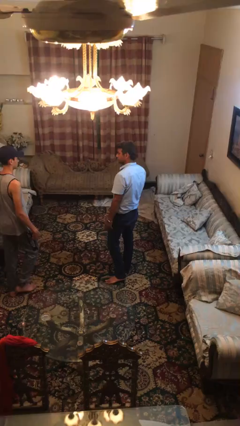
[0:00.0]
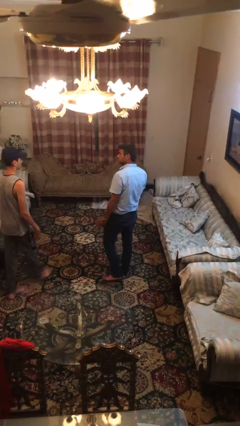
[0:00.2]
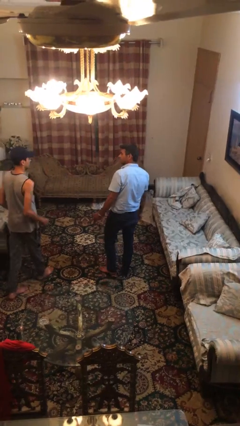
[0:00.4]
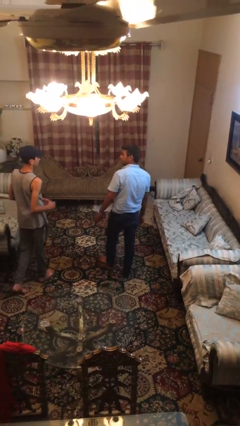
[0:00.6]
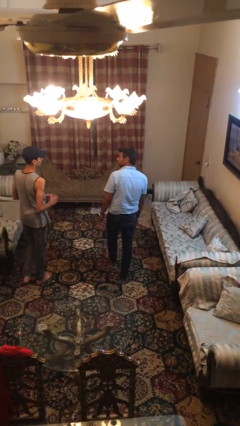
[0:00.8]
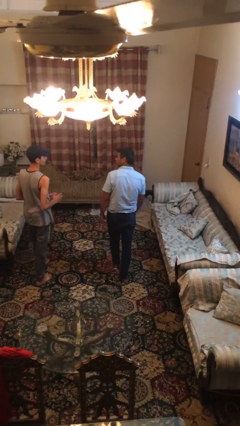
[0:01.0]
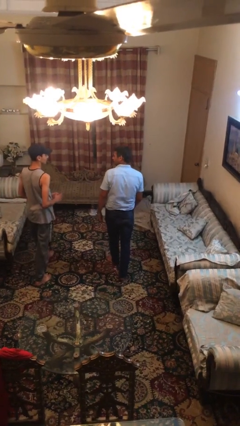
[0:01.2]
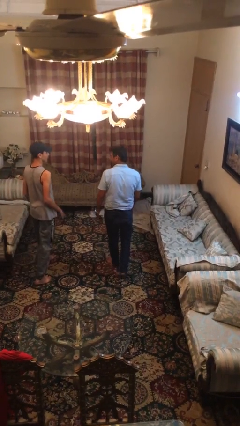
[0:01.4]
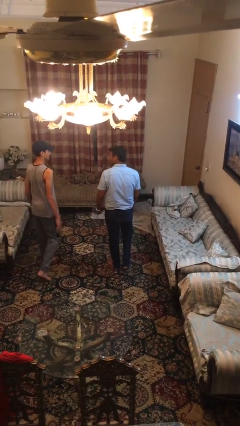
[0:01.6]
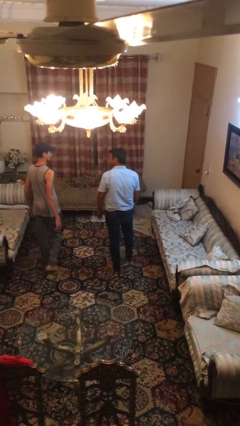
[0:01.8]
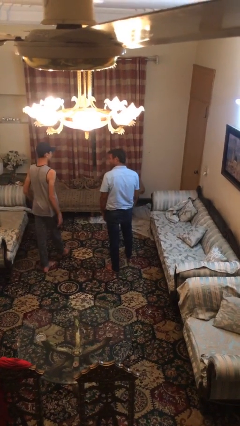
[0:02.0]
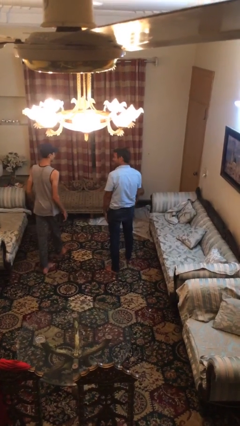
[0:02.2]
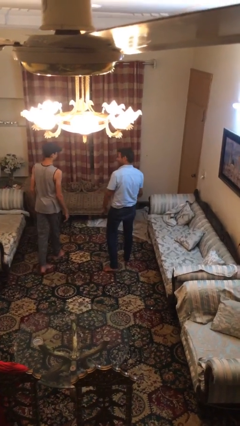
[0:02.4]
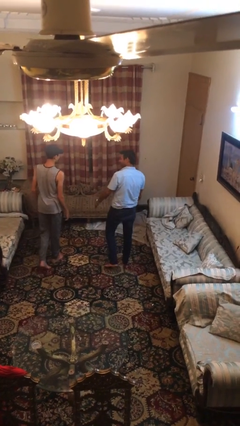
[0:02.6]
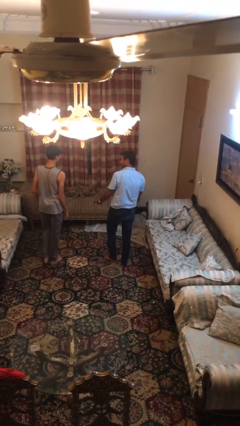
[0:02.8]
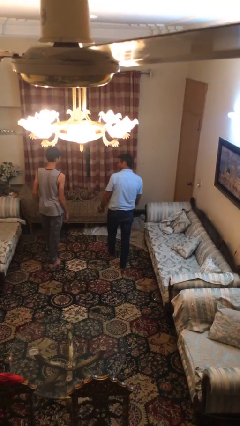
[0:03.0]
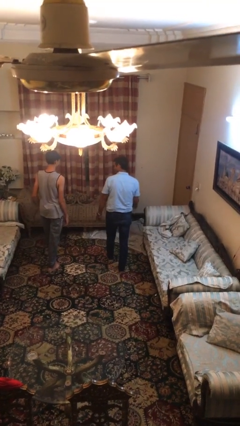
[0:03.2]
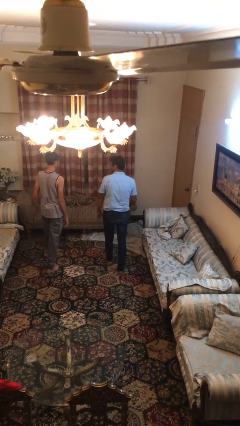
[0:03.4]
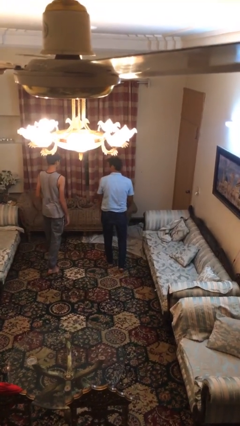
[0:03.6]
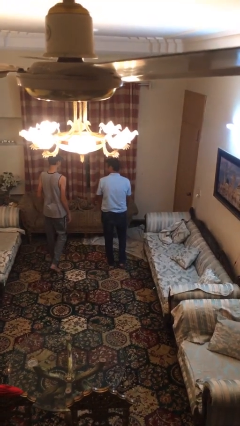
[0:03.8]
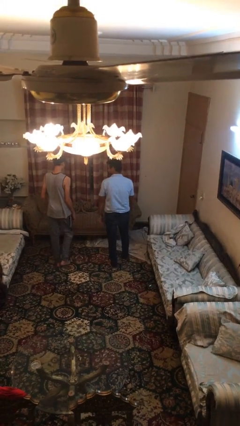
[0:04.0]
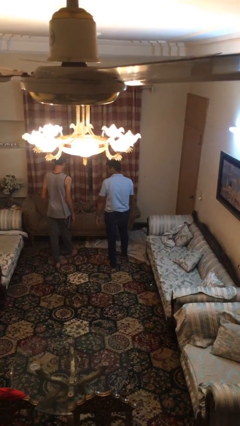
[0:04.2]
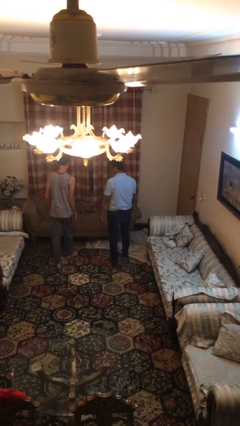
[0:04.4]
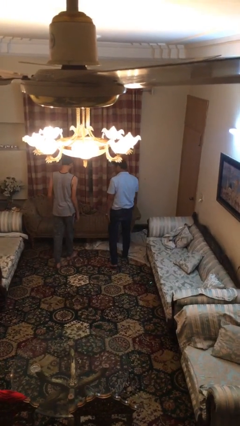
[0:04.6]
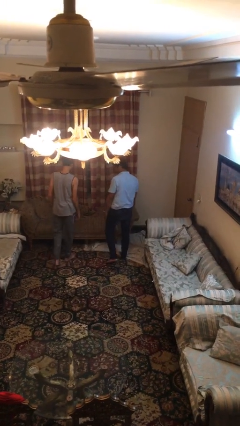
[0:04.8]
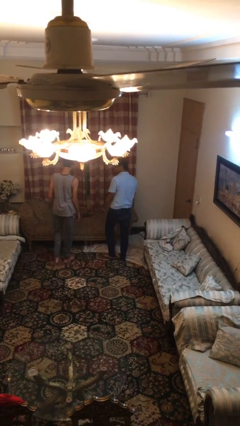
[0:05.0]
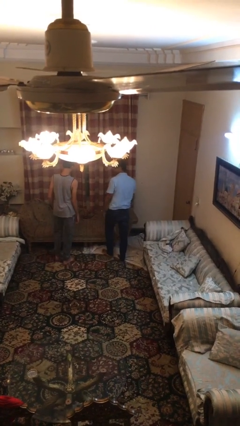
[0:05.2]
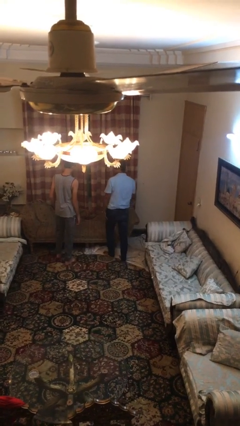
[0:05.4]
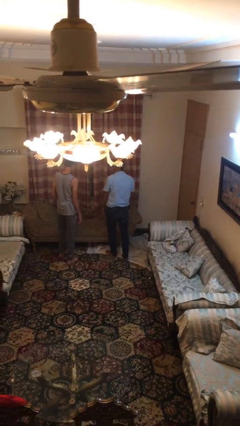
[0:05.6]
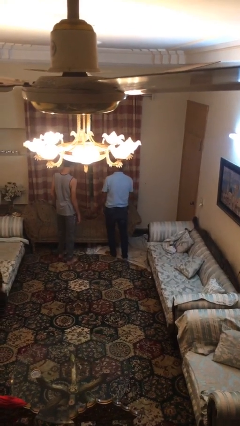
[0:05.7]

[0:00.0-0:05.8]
person talks to person

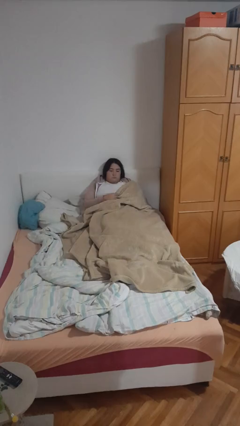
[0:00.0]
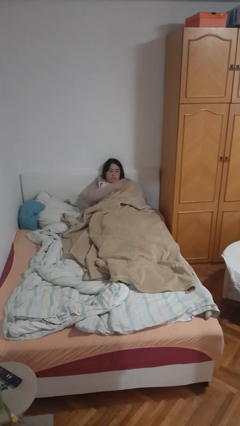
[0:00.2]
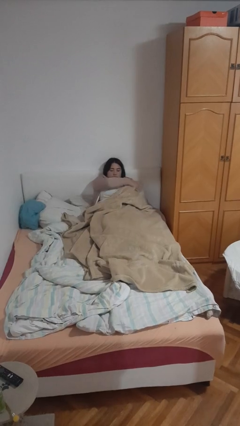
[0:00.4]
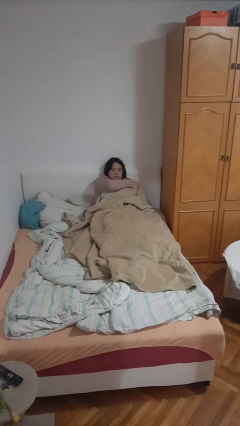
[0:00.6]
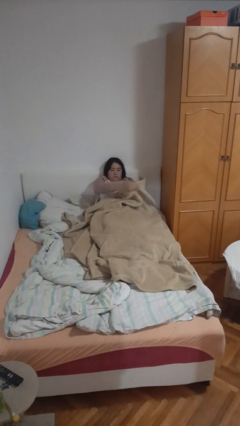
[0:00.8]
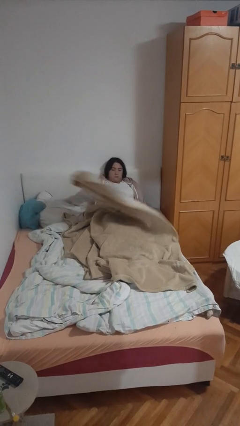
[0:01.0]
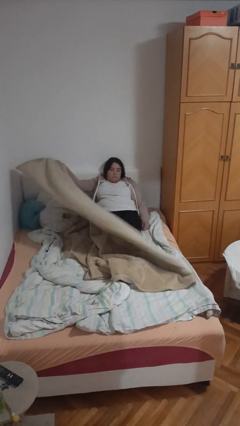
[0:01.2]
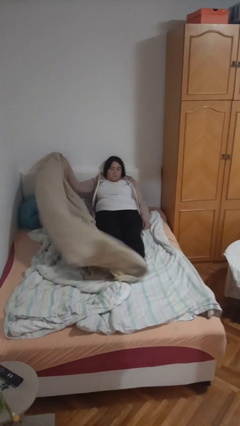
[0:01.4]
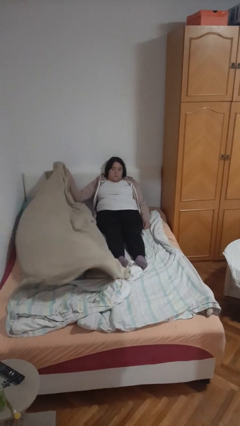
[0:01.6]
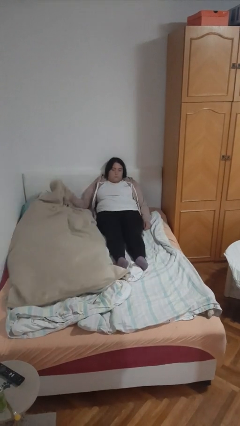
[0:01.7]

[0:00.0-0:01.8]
person uncovers with blanket

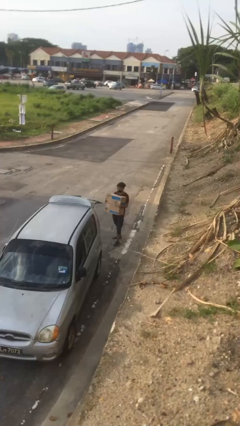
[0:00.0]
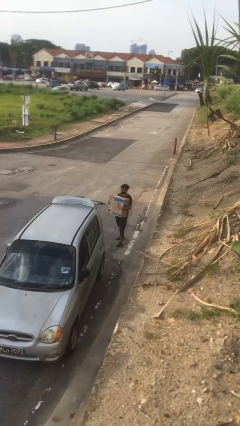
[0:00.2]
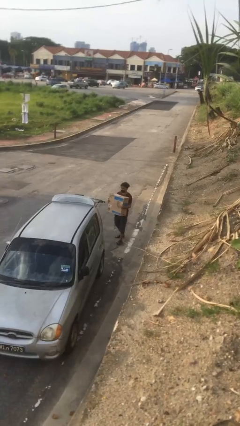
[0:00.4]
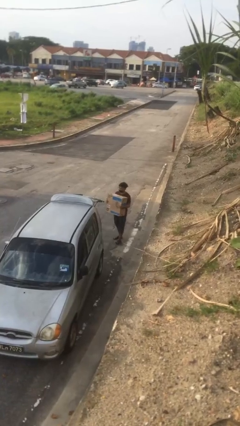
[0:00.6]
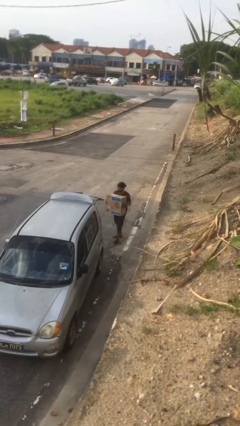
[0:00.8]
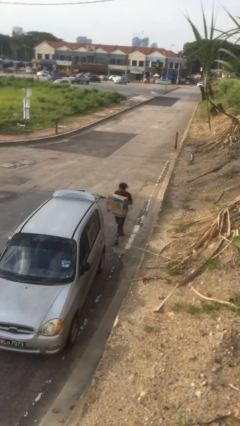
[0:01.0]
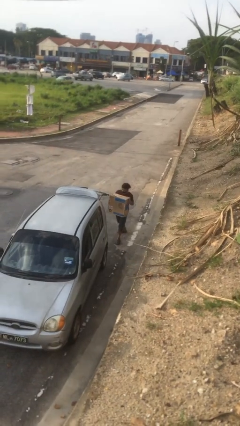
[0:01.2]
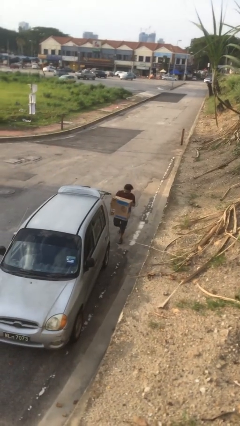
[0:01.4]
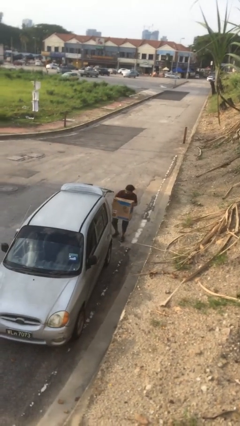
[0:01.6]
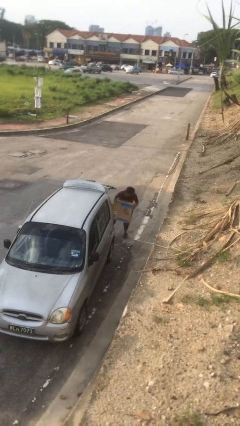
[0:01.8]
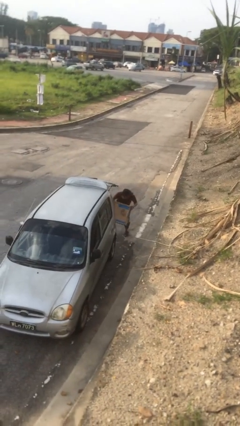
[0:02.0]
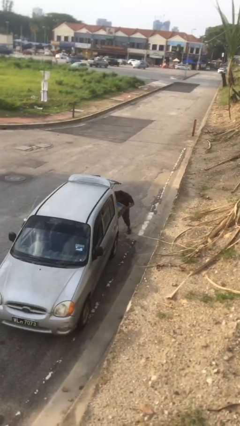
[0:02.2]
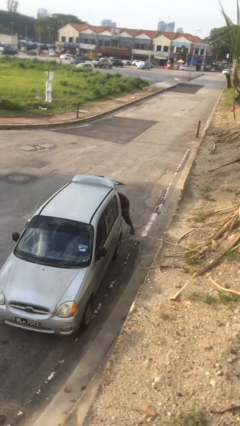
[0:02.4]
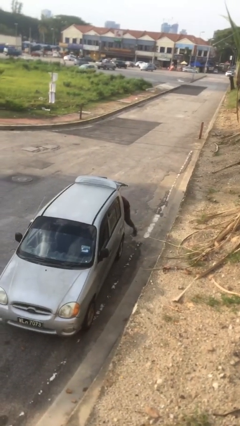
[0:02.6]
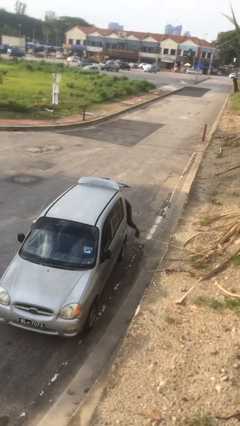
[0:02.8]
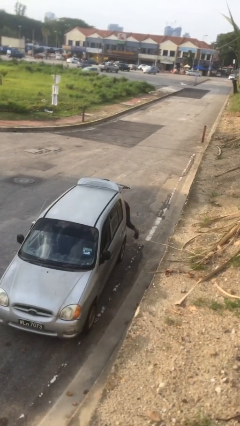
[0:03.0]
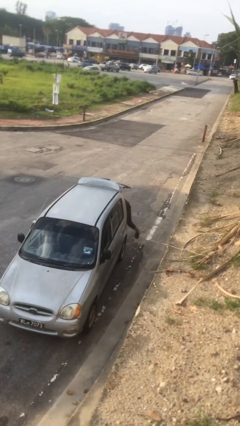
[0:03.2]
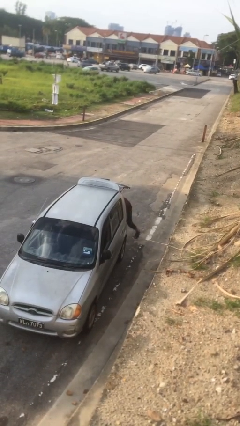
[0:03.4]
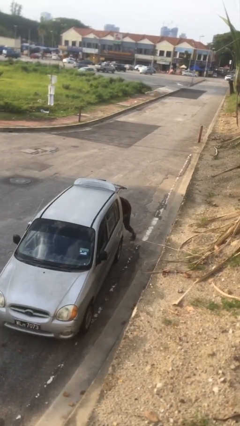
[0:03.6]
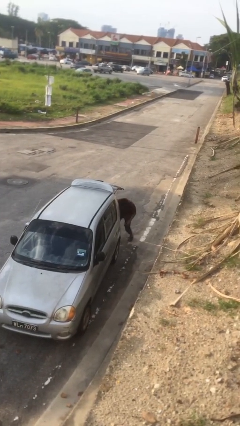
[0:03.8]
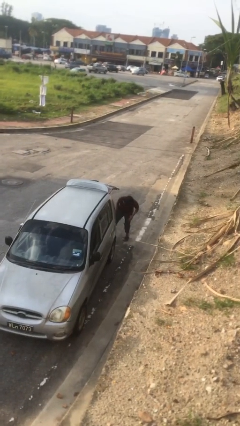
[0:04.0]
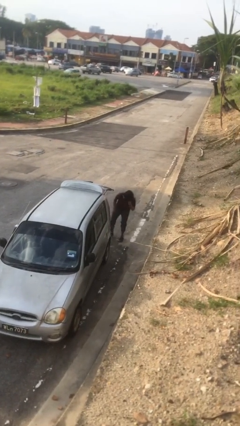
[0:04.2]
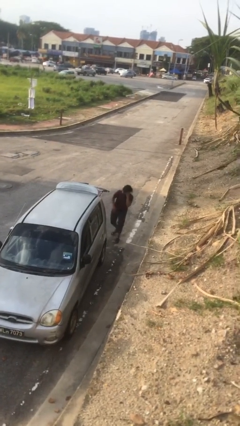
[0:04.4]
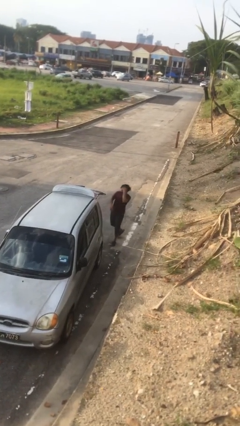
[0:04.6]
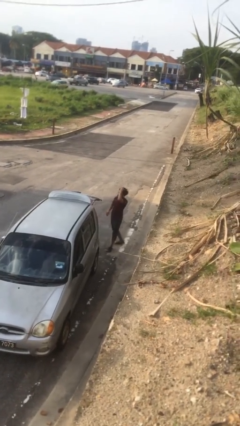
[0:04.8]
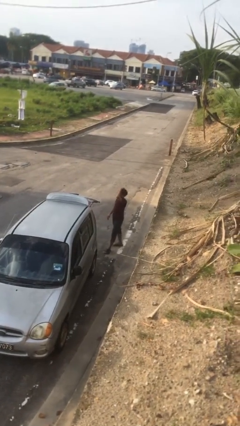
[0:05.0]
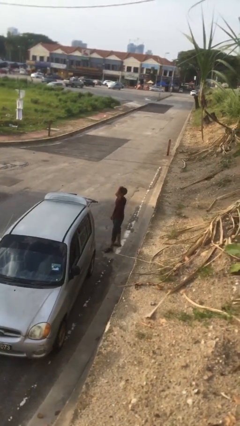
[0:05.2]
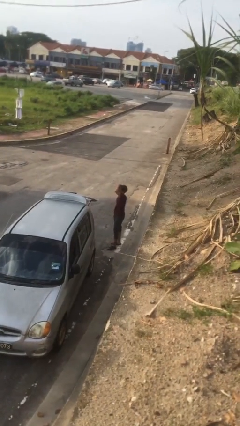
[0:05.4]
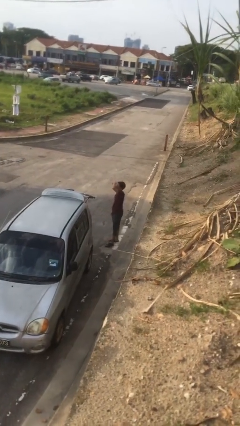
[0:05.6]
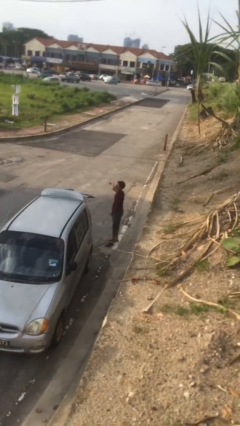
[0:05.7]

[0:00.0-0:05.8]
person loads car

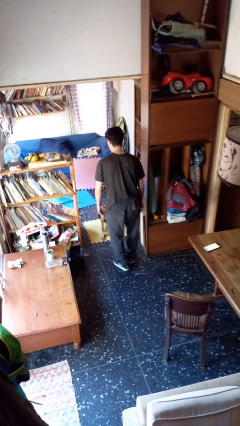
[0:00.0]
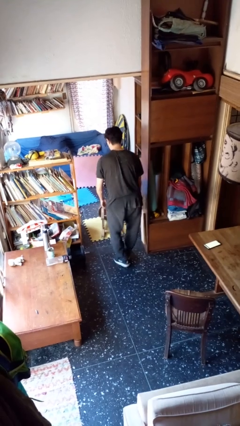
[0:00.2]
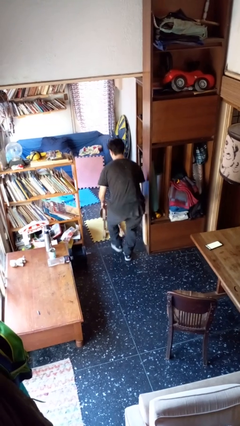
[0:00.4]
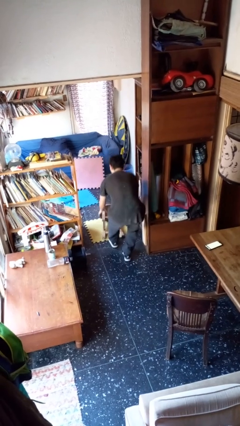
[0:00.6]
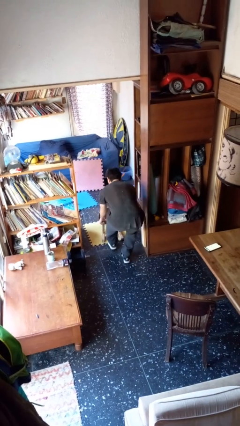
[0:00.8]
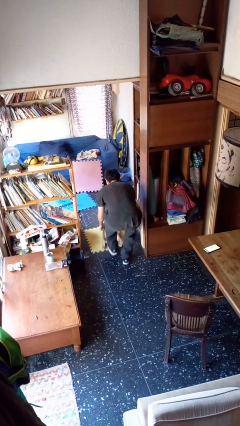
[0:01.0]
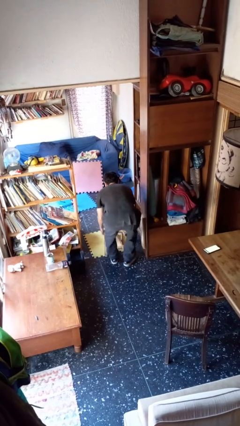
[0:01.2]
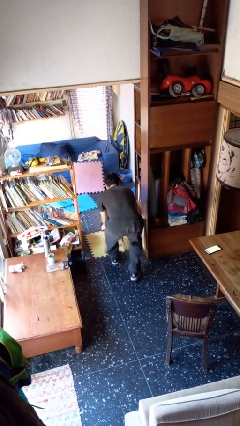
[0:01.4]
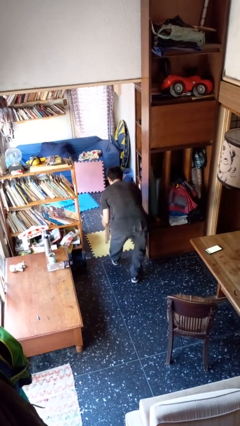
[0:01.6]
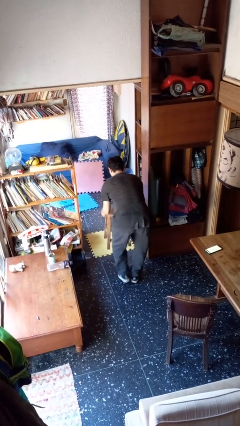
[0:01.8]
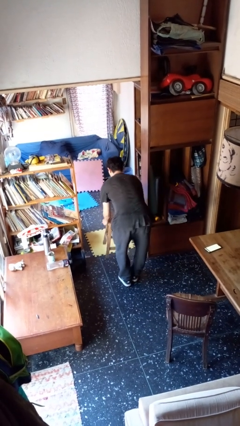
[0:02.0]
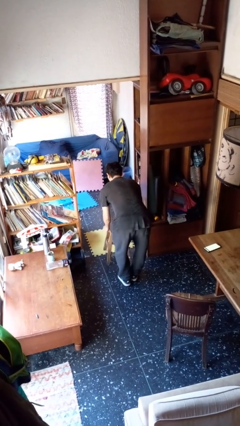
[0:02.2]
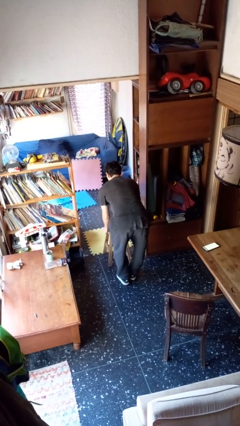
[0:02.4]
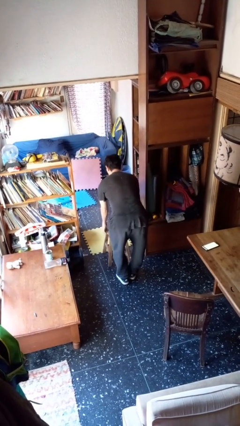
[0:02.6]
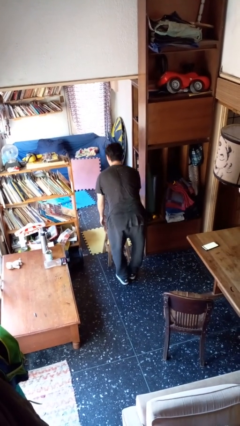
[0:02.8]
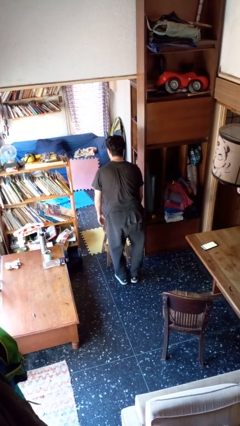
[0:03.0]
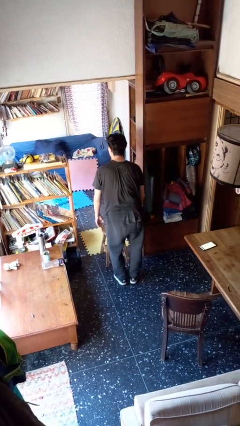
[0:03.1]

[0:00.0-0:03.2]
person sets upright furniture

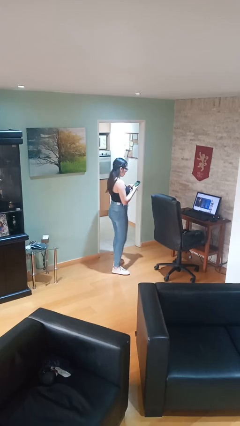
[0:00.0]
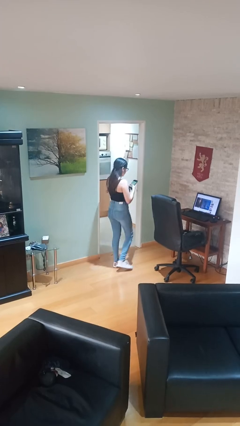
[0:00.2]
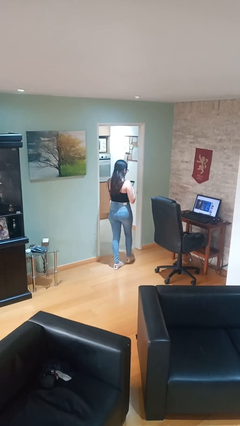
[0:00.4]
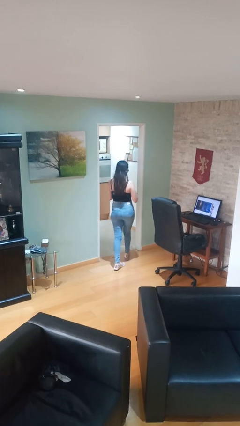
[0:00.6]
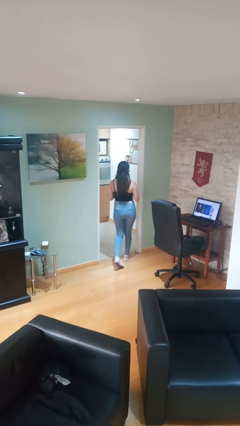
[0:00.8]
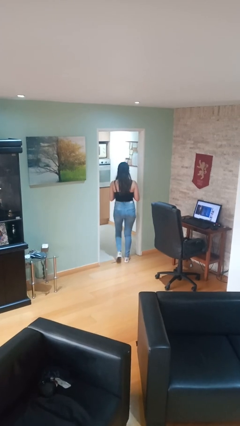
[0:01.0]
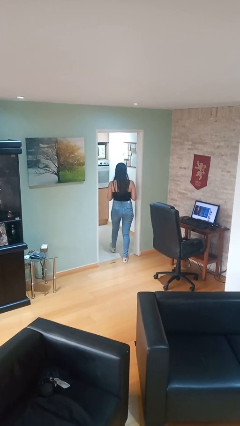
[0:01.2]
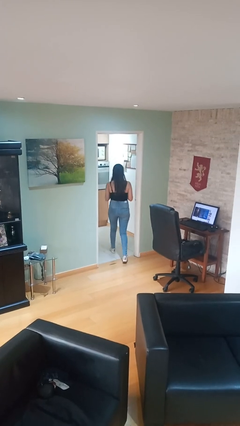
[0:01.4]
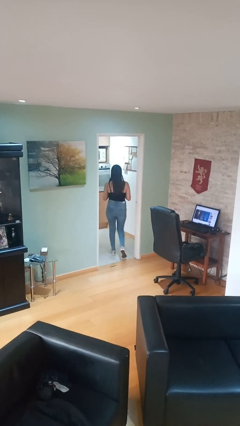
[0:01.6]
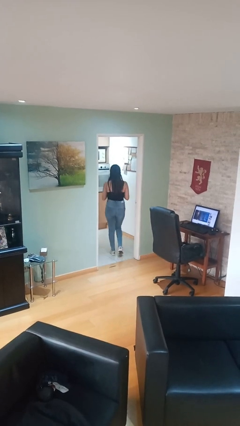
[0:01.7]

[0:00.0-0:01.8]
person exits scene through structure
